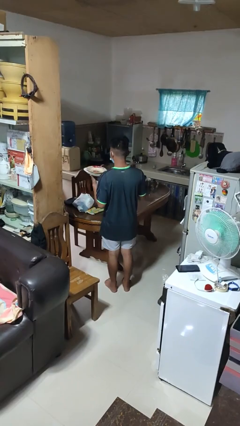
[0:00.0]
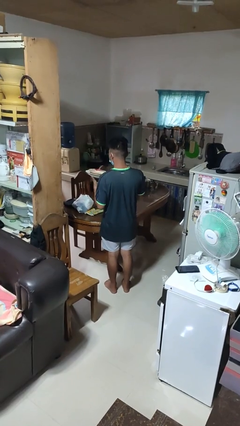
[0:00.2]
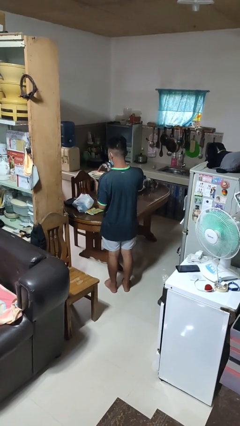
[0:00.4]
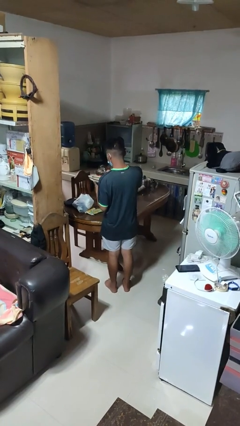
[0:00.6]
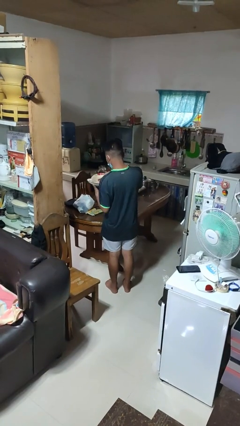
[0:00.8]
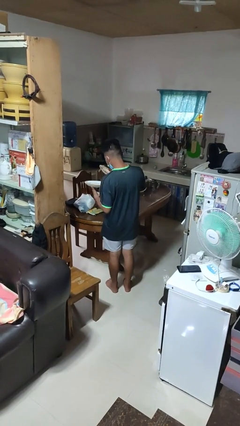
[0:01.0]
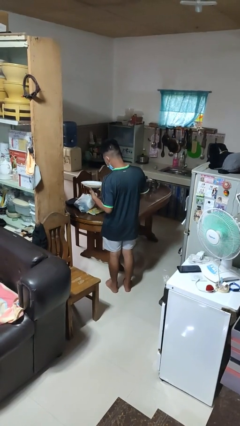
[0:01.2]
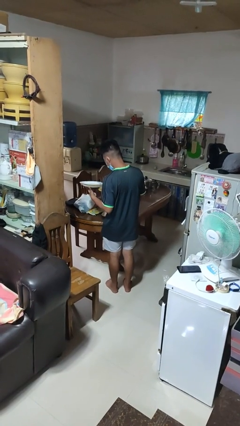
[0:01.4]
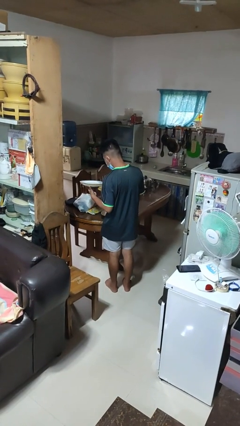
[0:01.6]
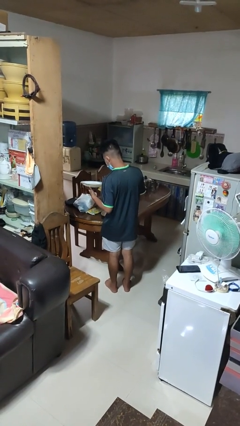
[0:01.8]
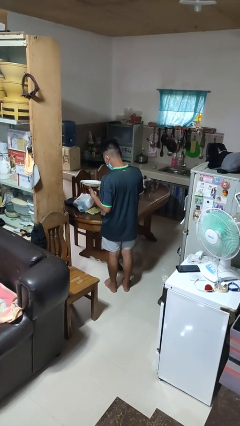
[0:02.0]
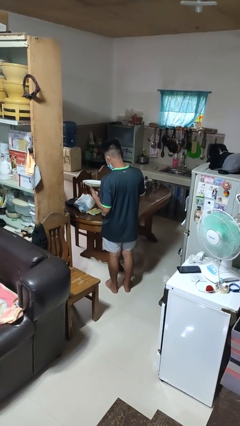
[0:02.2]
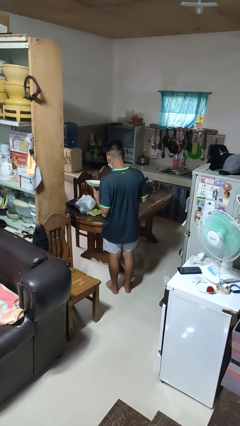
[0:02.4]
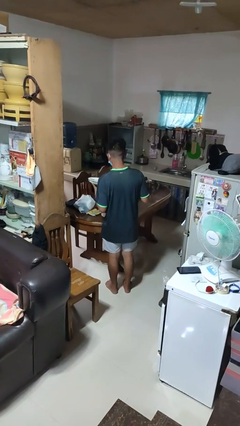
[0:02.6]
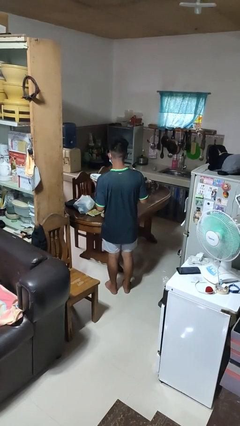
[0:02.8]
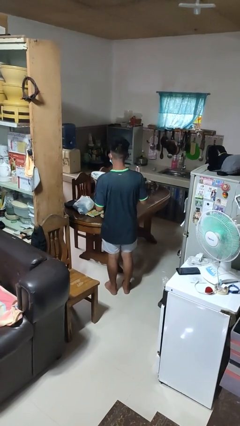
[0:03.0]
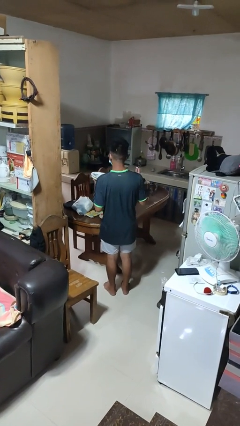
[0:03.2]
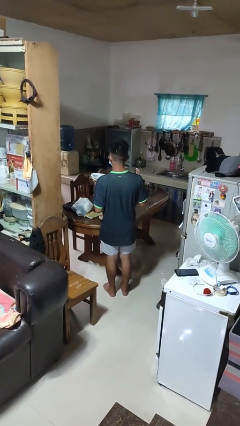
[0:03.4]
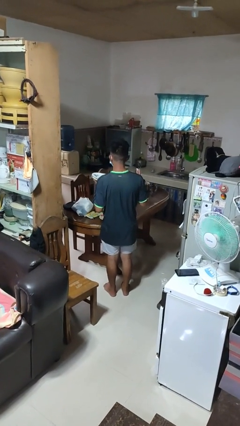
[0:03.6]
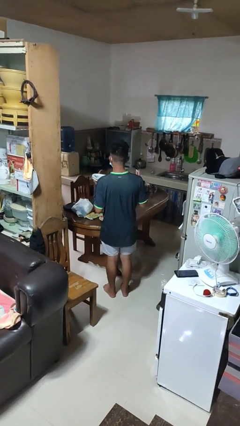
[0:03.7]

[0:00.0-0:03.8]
person sets table

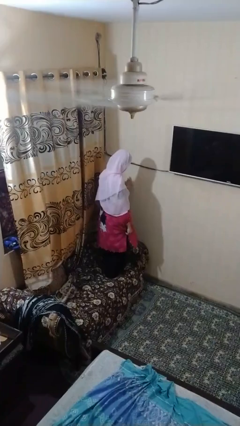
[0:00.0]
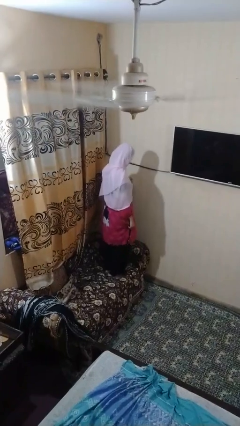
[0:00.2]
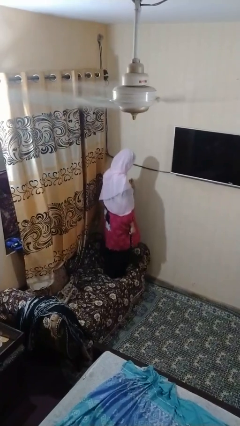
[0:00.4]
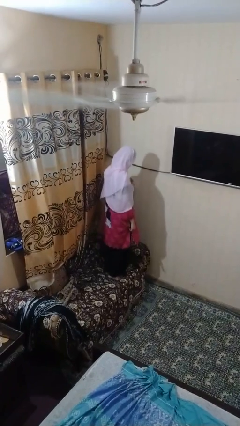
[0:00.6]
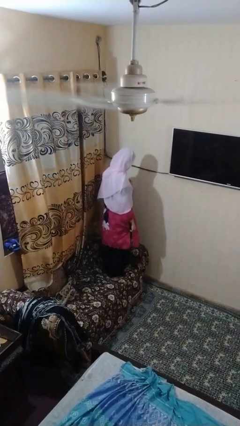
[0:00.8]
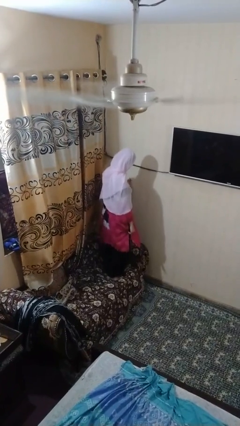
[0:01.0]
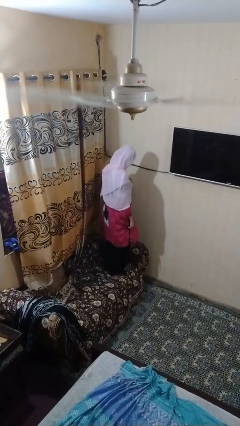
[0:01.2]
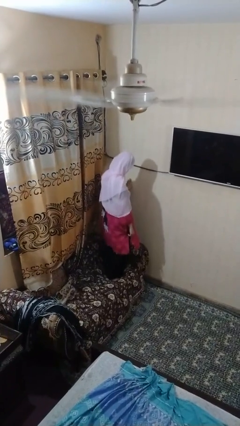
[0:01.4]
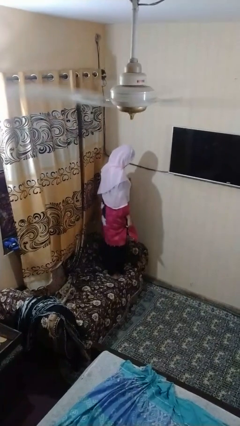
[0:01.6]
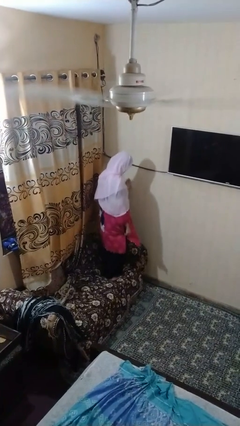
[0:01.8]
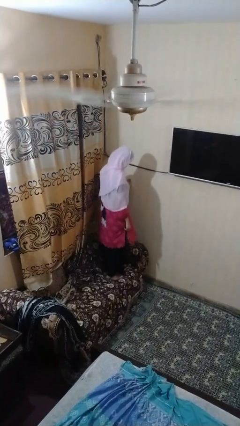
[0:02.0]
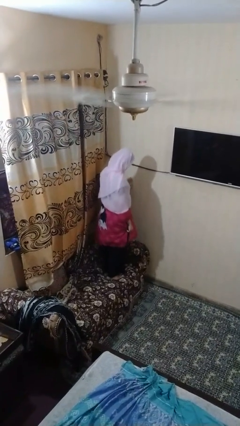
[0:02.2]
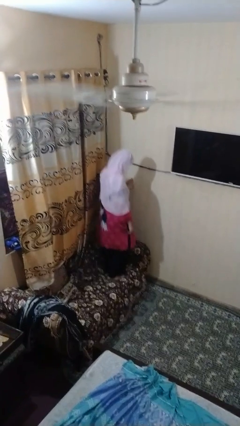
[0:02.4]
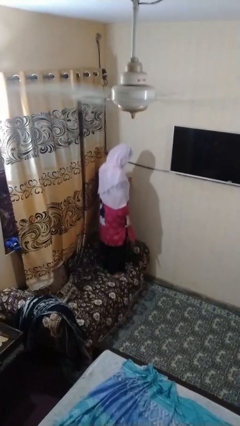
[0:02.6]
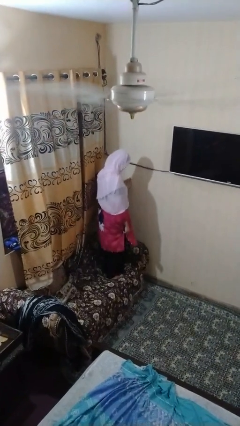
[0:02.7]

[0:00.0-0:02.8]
person jumps on couch

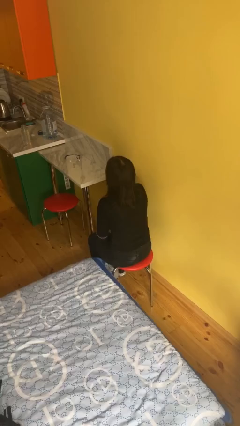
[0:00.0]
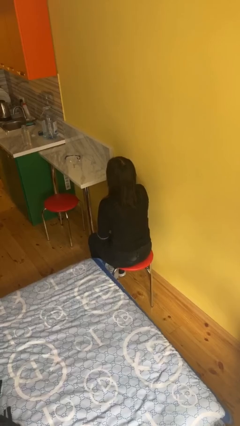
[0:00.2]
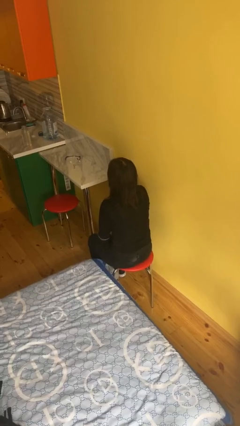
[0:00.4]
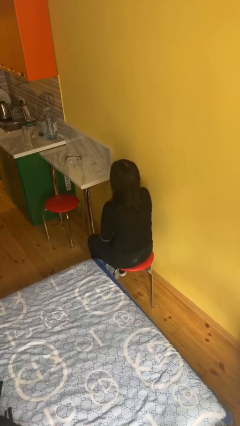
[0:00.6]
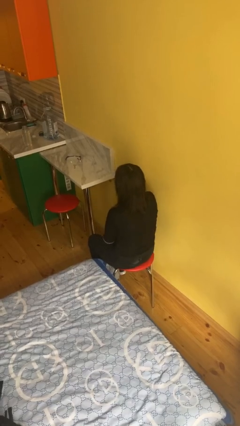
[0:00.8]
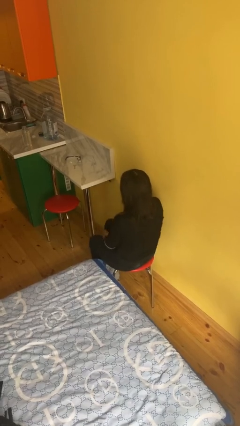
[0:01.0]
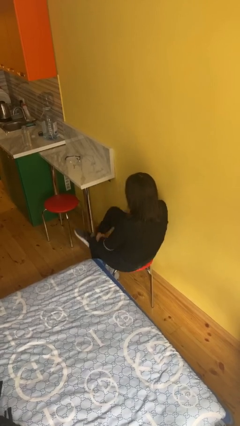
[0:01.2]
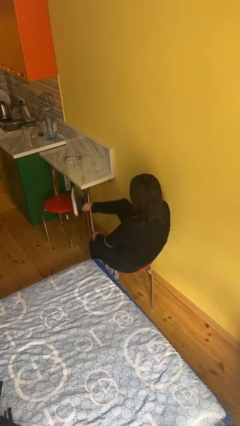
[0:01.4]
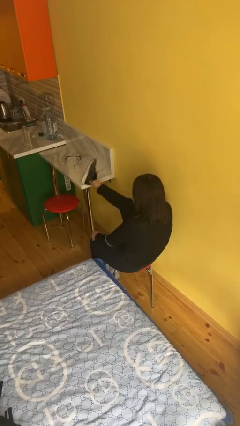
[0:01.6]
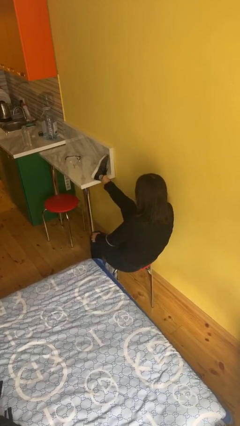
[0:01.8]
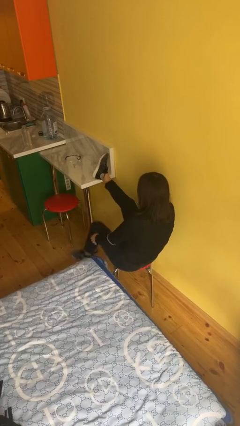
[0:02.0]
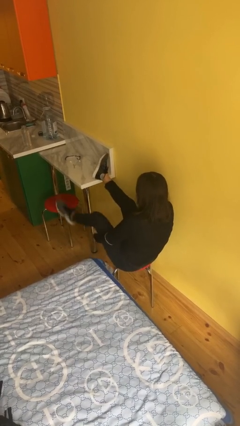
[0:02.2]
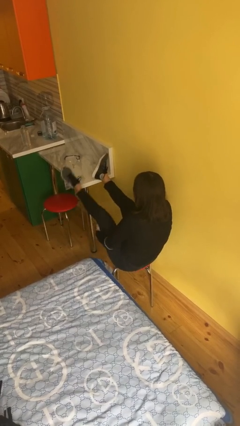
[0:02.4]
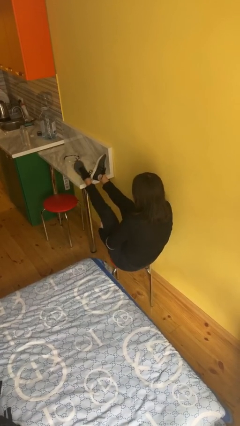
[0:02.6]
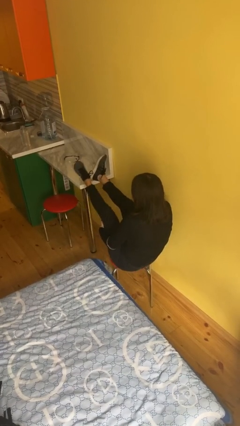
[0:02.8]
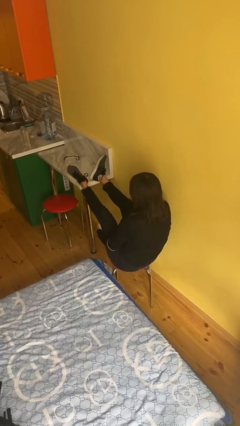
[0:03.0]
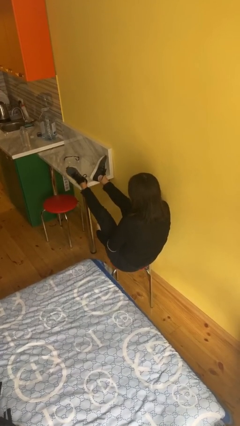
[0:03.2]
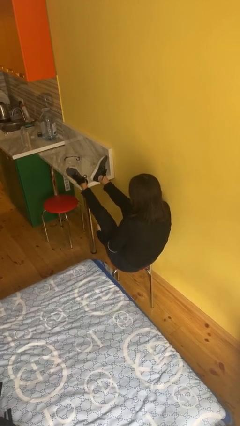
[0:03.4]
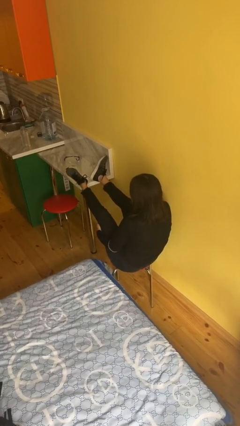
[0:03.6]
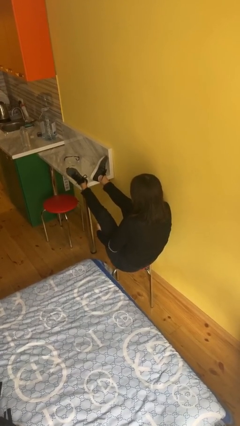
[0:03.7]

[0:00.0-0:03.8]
person puts feet up

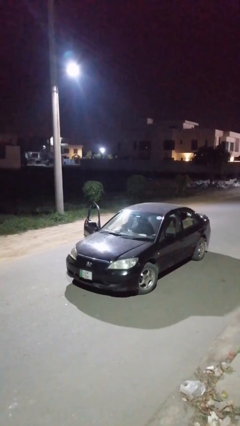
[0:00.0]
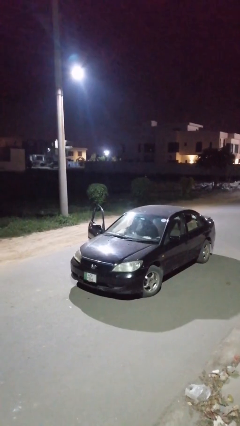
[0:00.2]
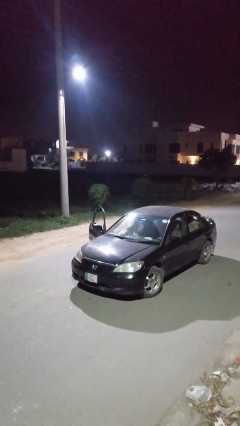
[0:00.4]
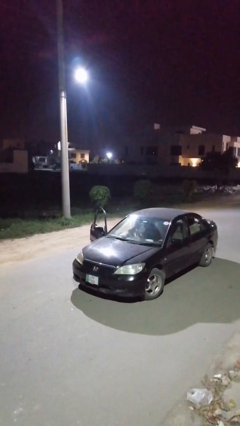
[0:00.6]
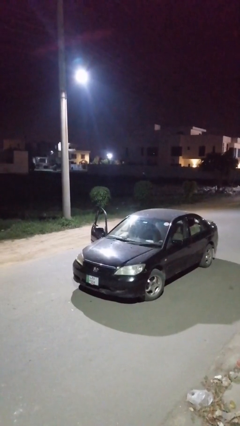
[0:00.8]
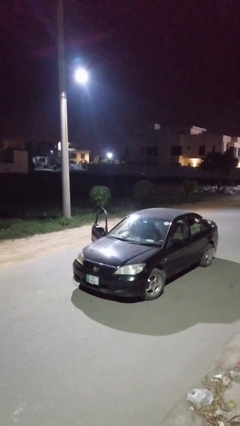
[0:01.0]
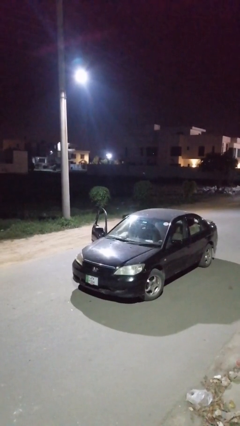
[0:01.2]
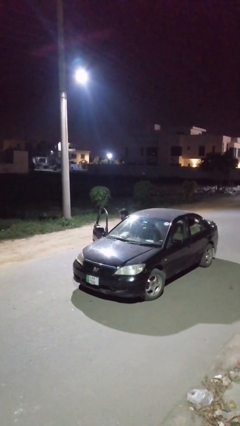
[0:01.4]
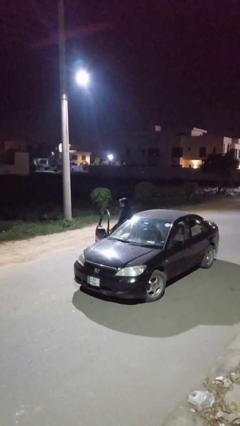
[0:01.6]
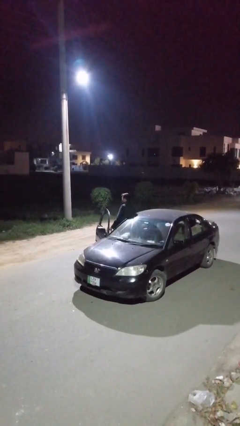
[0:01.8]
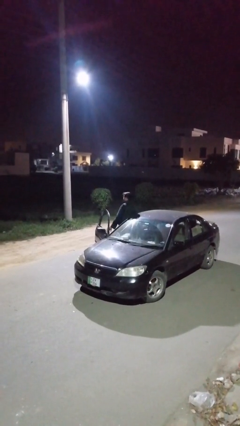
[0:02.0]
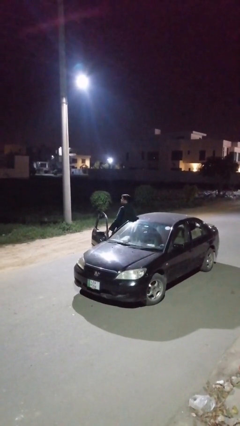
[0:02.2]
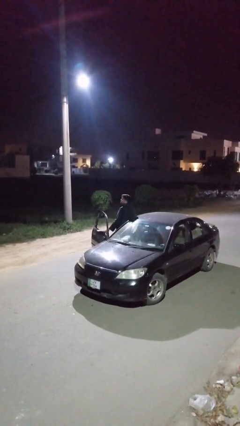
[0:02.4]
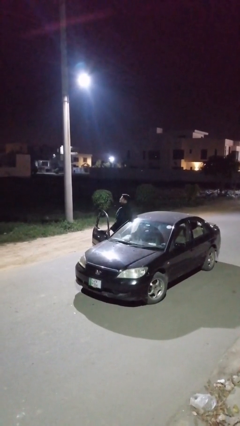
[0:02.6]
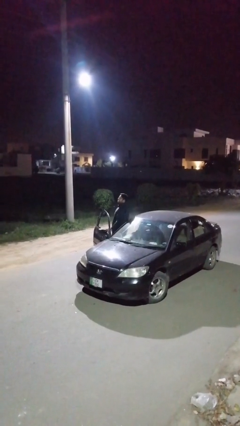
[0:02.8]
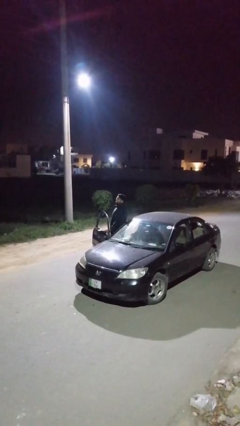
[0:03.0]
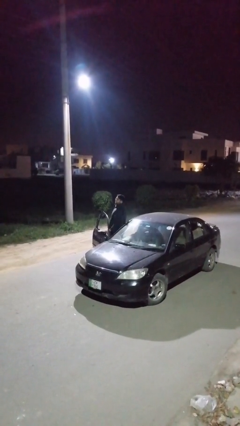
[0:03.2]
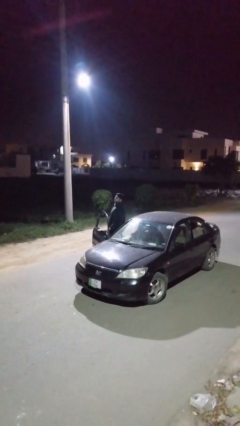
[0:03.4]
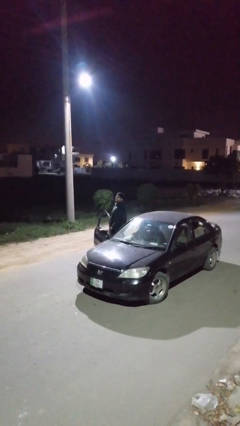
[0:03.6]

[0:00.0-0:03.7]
person exits car

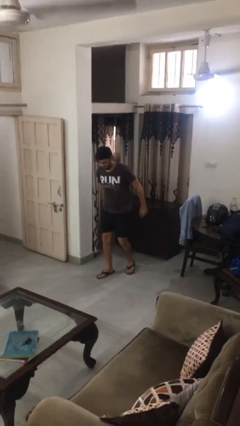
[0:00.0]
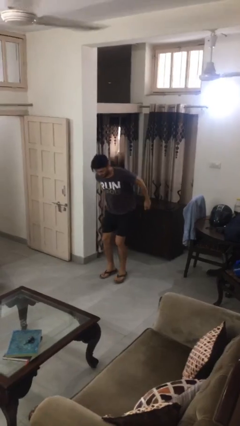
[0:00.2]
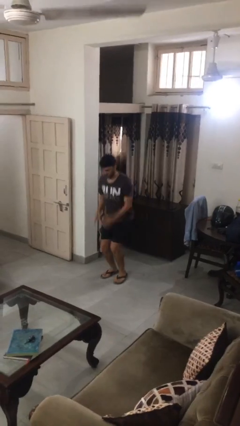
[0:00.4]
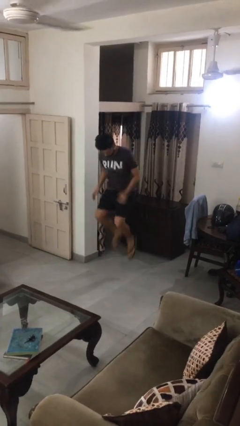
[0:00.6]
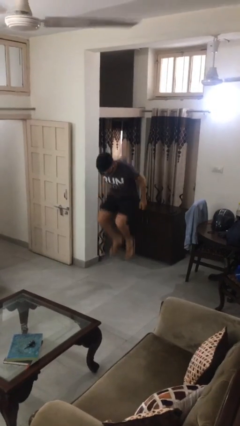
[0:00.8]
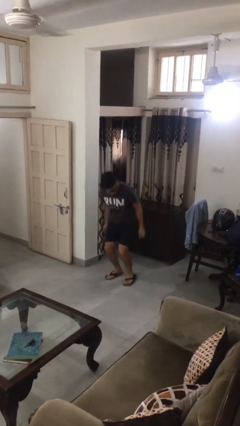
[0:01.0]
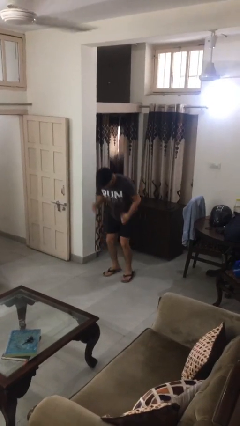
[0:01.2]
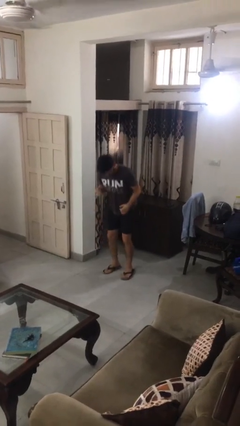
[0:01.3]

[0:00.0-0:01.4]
person jumps

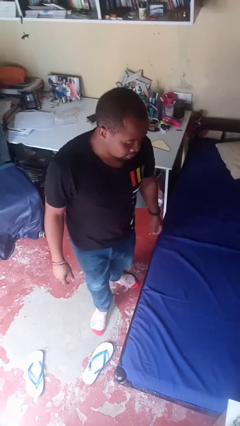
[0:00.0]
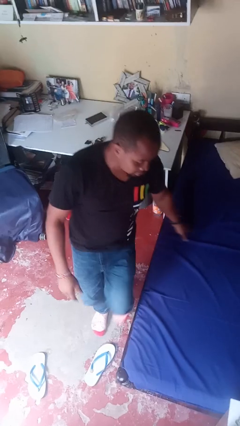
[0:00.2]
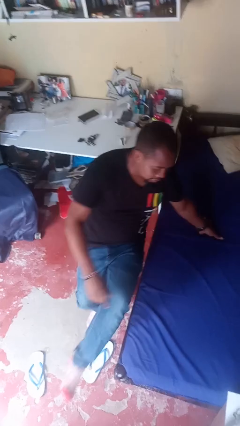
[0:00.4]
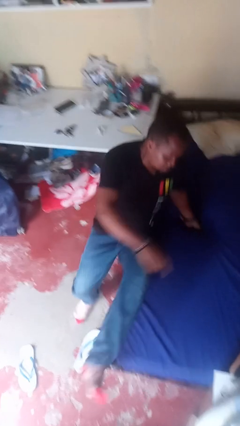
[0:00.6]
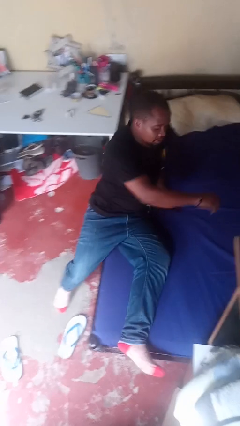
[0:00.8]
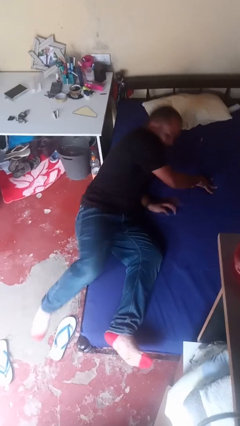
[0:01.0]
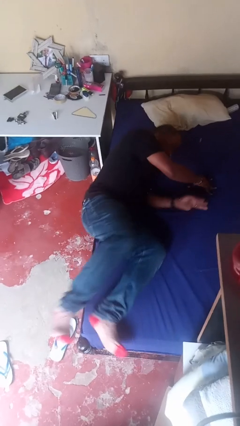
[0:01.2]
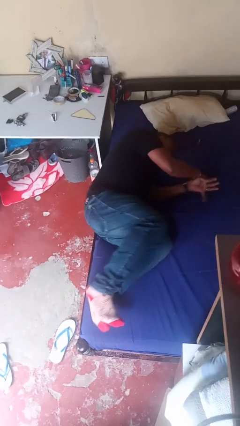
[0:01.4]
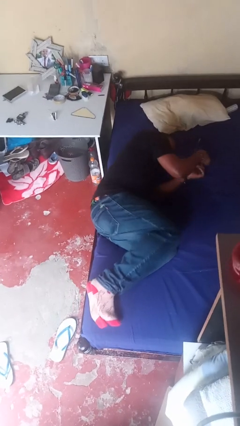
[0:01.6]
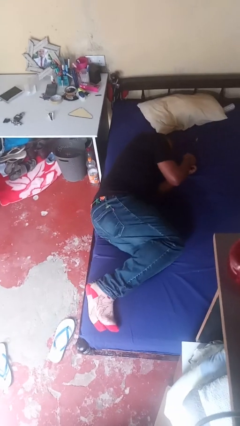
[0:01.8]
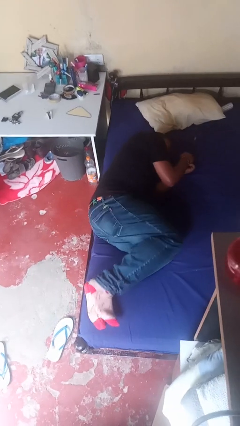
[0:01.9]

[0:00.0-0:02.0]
person lies down on bed
